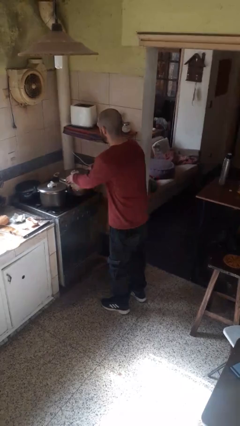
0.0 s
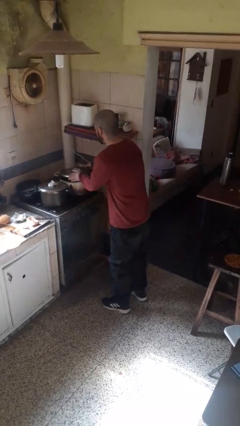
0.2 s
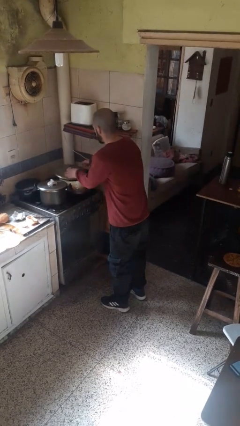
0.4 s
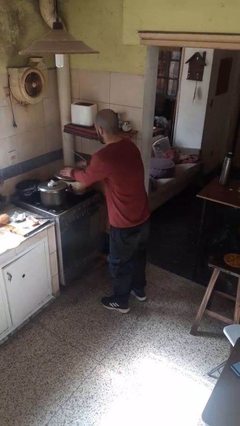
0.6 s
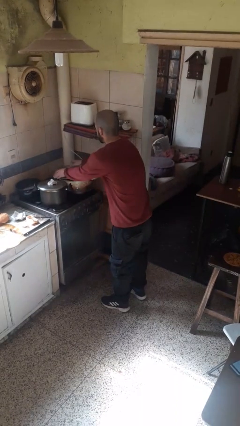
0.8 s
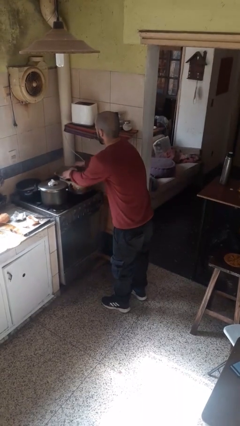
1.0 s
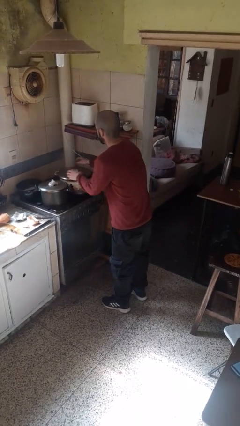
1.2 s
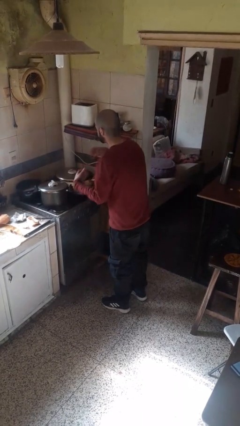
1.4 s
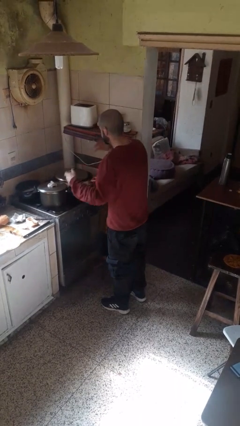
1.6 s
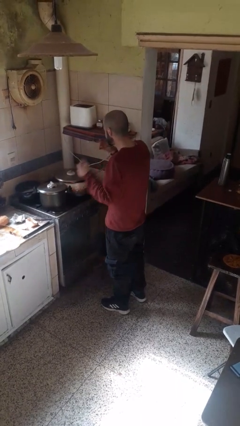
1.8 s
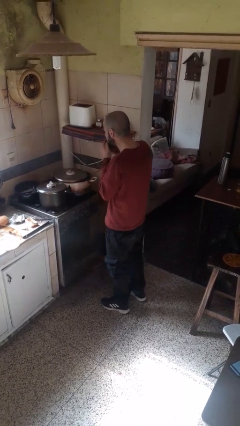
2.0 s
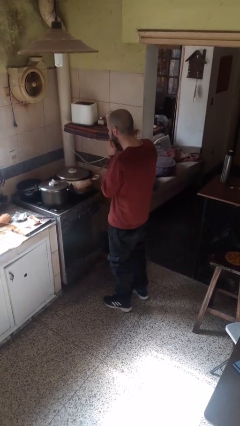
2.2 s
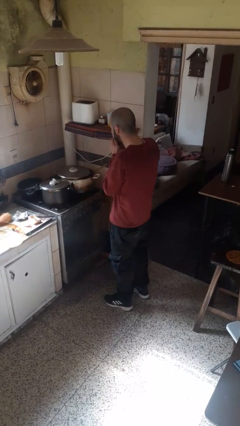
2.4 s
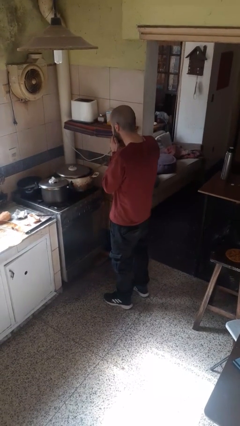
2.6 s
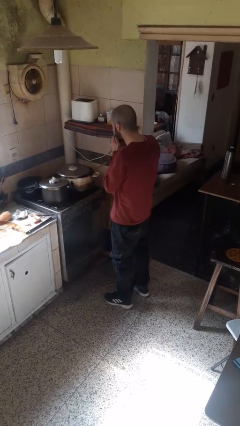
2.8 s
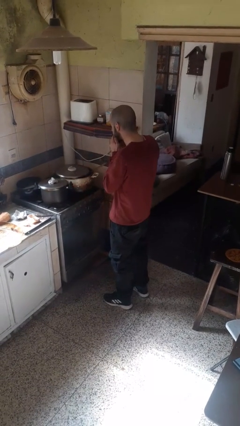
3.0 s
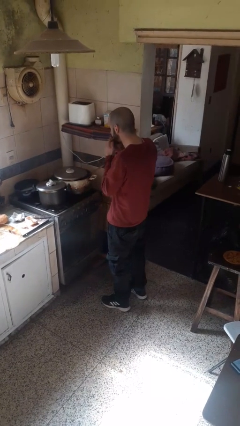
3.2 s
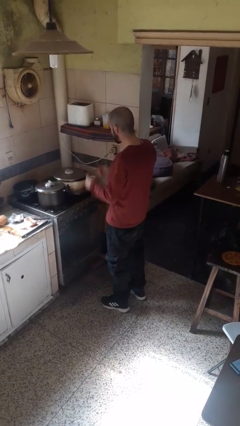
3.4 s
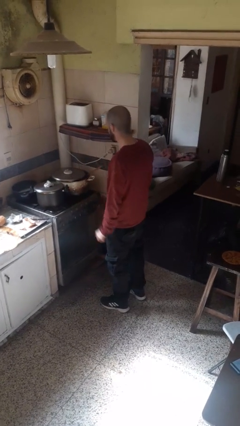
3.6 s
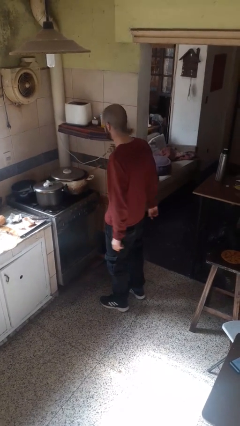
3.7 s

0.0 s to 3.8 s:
person burns hand

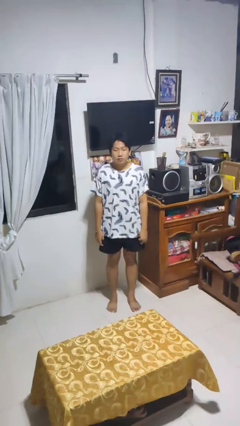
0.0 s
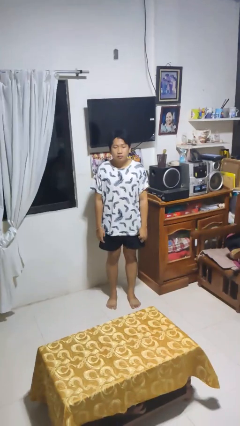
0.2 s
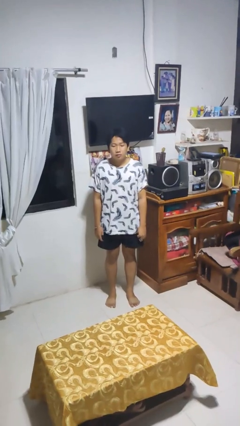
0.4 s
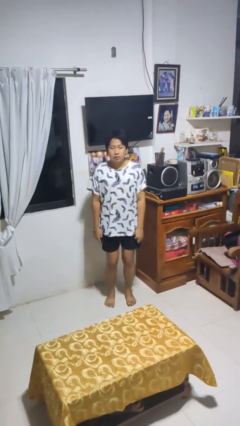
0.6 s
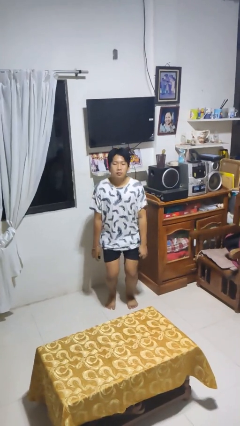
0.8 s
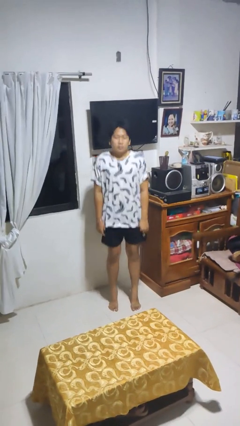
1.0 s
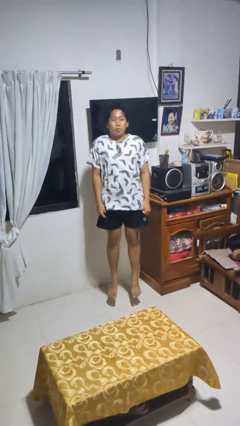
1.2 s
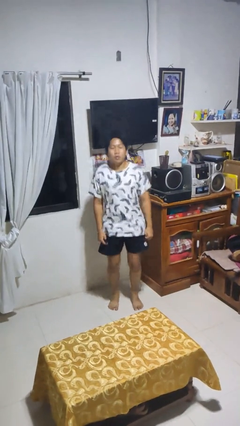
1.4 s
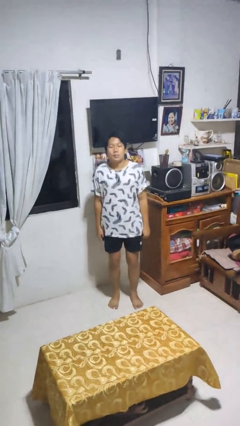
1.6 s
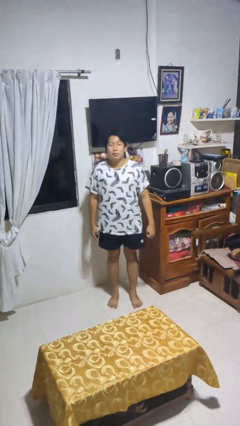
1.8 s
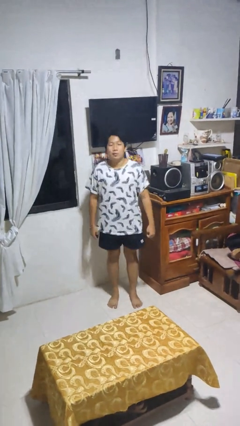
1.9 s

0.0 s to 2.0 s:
person jumps

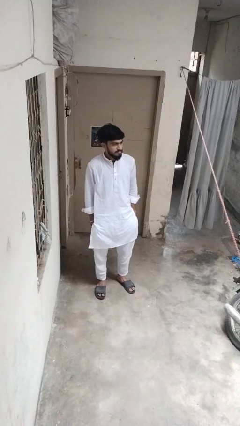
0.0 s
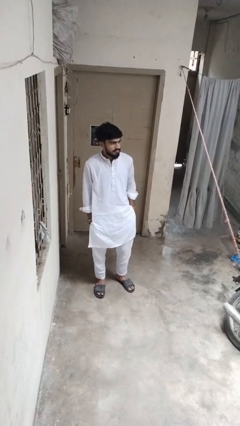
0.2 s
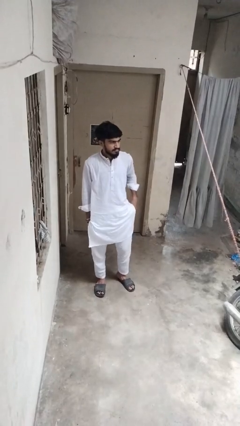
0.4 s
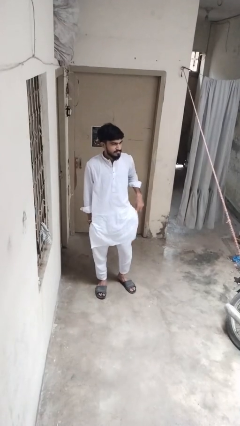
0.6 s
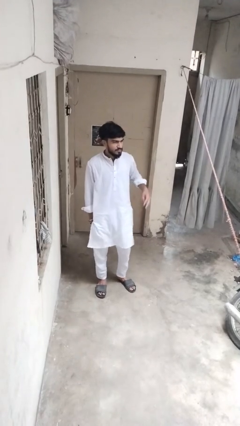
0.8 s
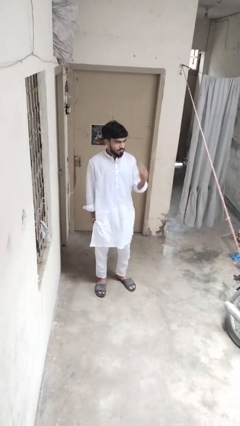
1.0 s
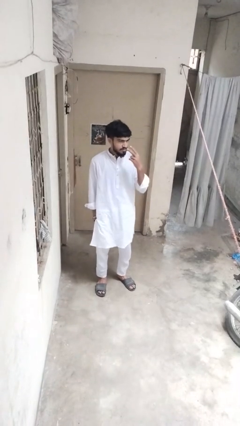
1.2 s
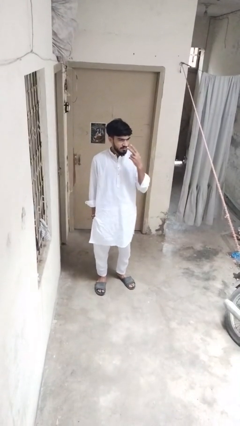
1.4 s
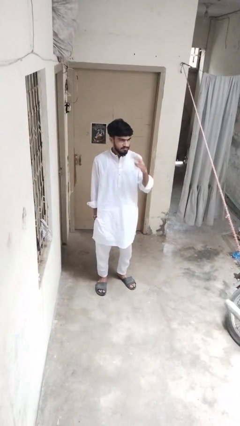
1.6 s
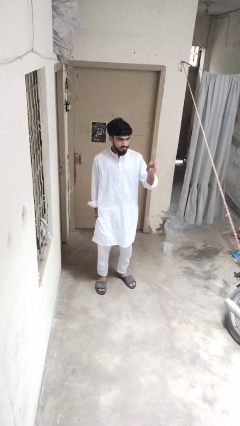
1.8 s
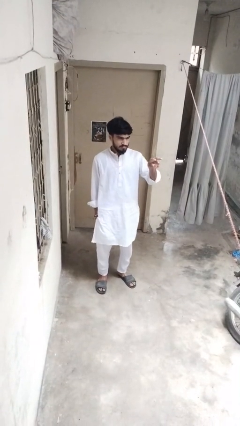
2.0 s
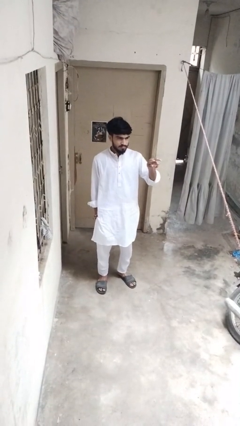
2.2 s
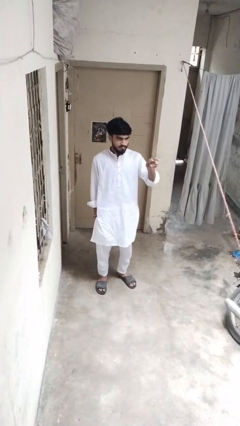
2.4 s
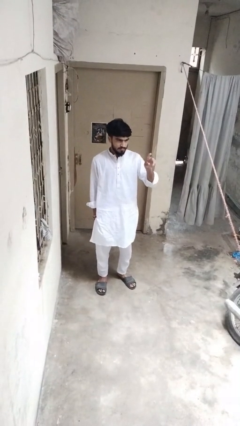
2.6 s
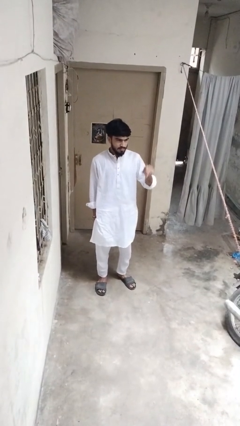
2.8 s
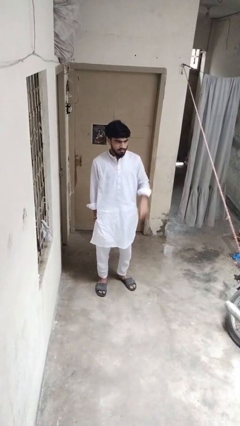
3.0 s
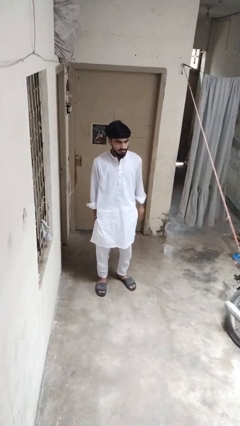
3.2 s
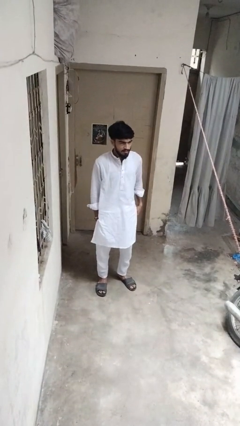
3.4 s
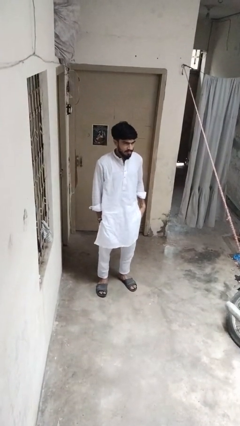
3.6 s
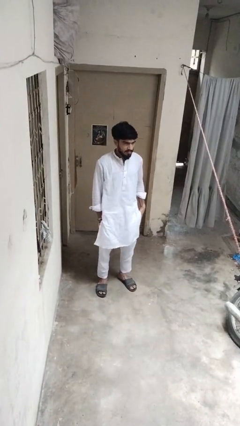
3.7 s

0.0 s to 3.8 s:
person gestures watch closely

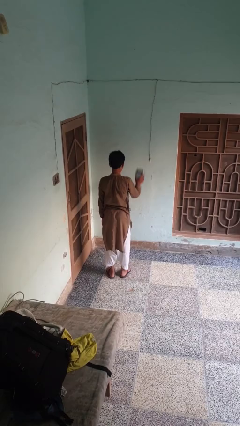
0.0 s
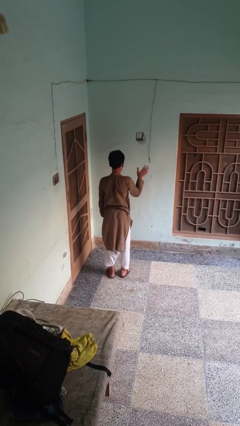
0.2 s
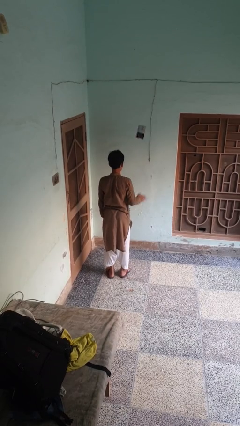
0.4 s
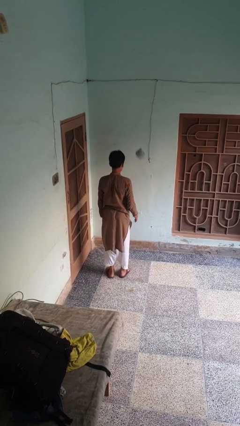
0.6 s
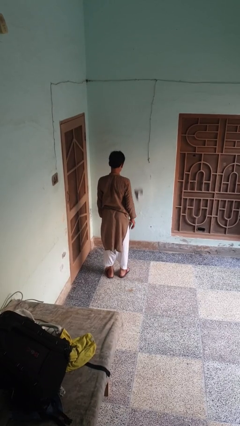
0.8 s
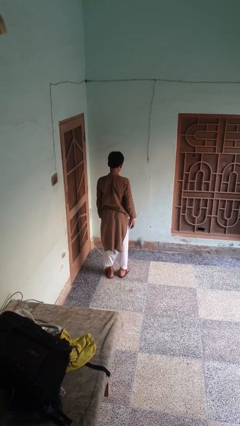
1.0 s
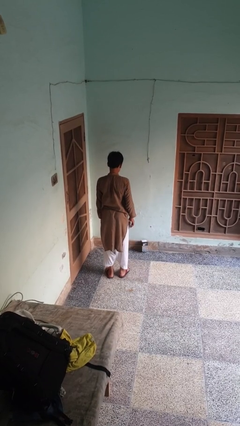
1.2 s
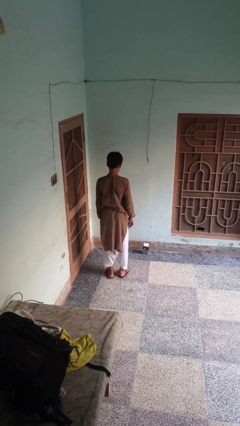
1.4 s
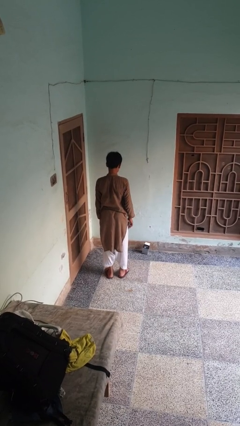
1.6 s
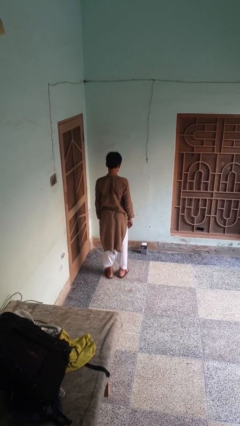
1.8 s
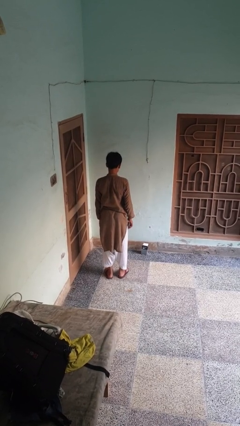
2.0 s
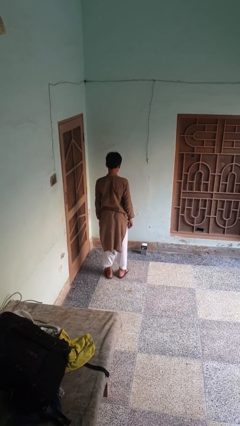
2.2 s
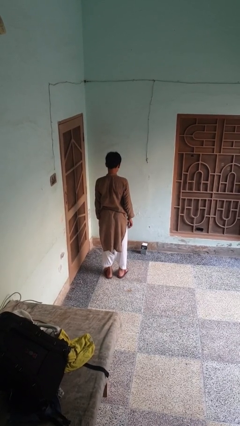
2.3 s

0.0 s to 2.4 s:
person throws object into air

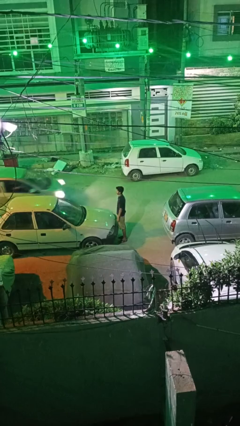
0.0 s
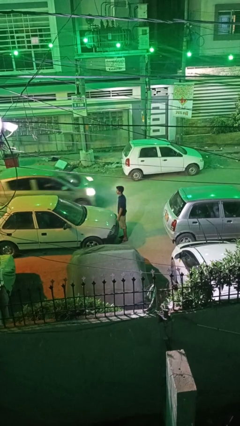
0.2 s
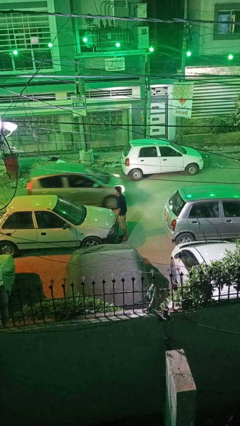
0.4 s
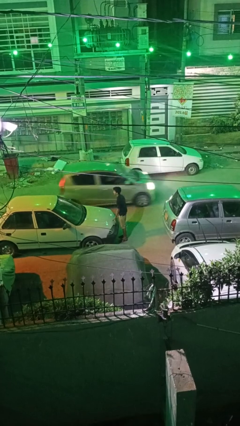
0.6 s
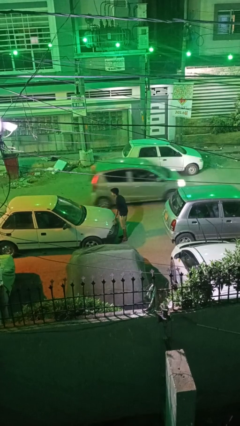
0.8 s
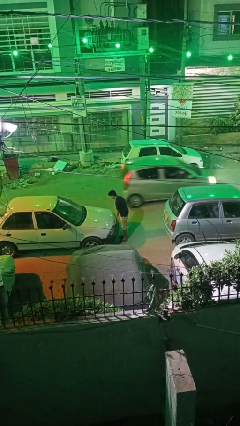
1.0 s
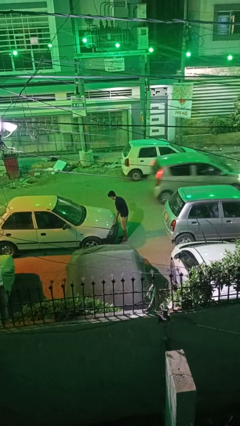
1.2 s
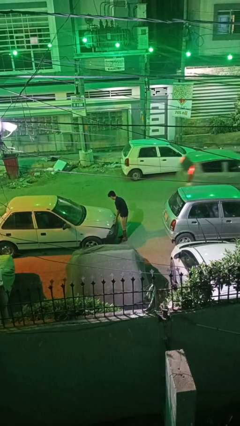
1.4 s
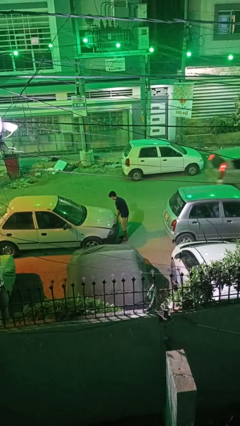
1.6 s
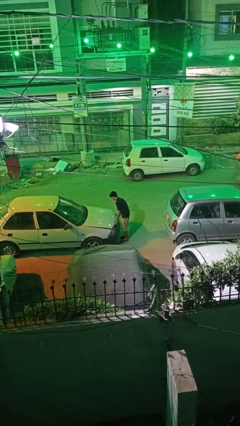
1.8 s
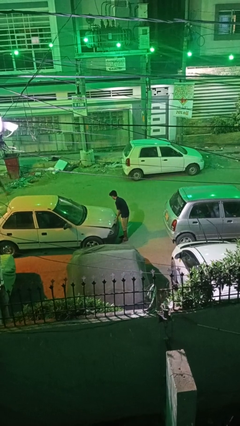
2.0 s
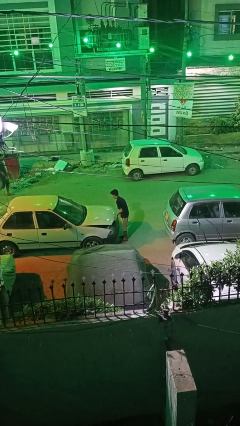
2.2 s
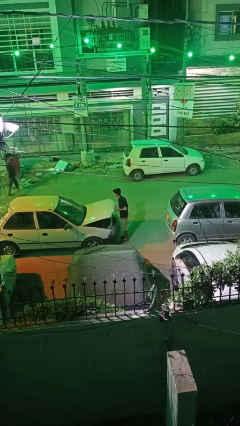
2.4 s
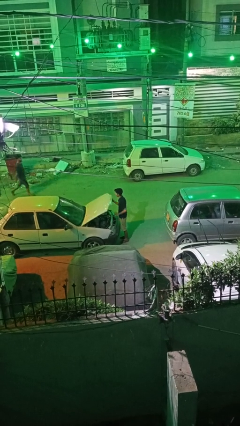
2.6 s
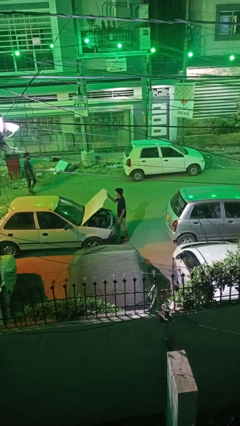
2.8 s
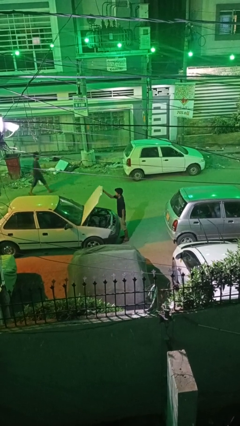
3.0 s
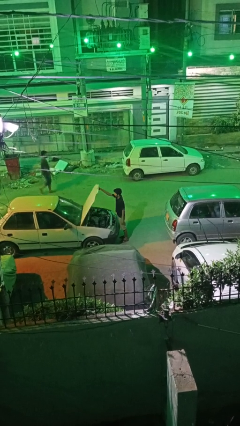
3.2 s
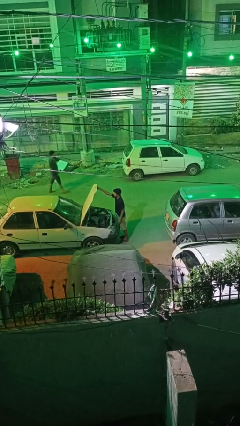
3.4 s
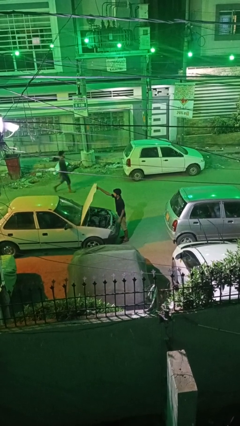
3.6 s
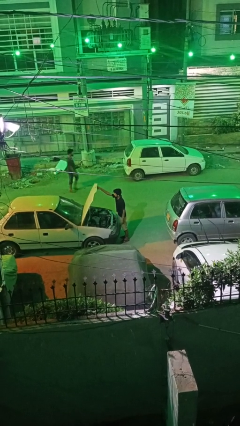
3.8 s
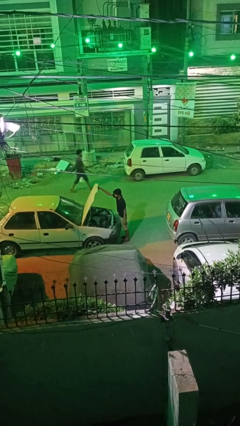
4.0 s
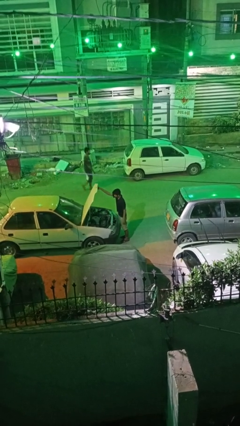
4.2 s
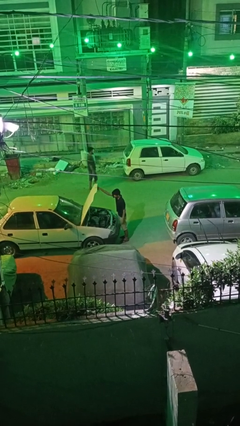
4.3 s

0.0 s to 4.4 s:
person opens car hood

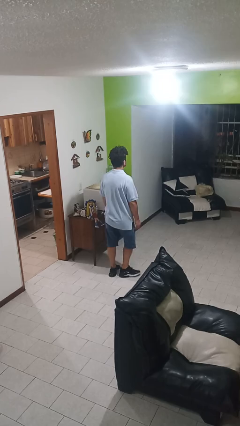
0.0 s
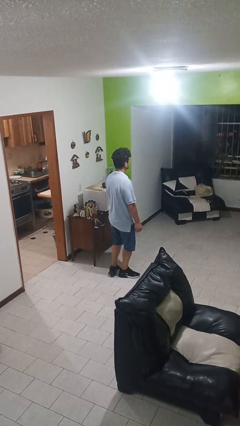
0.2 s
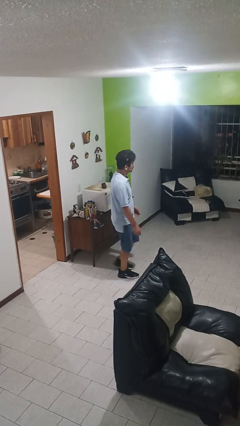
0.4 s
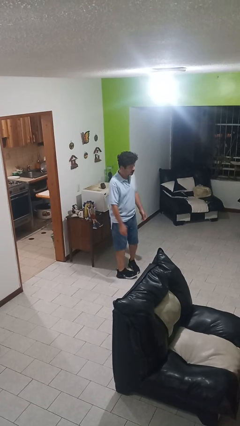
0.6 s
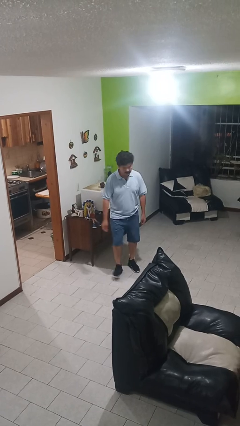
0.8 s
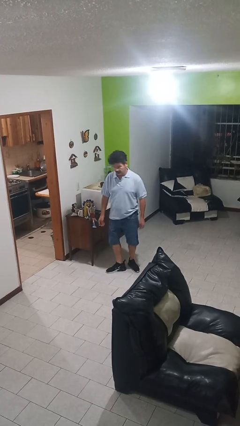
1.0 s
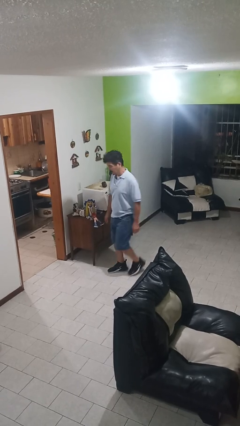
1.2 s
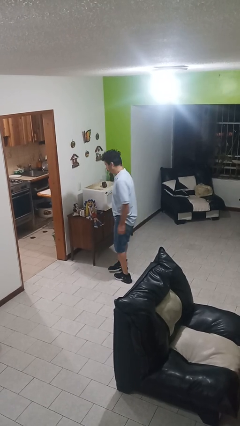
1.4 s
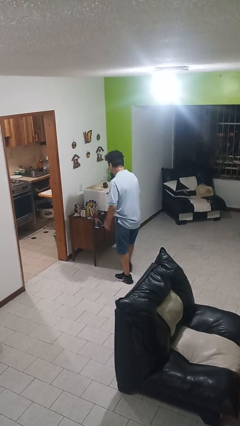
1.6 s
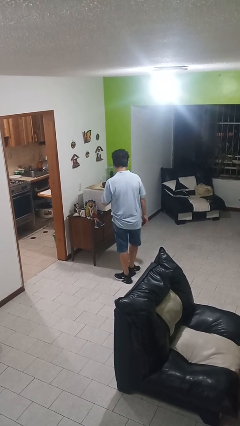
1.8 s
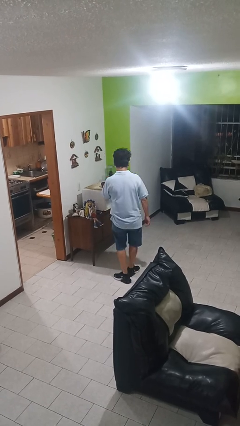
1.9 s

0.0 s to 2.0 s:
person twirls
